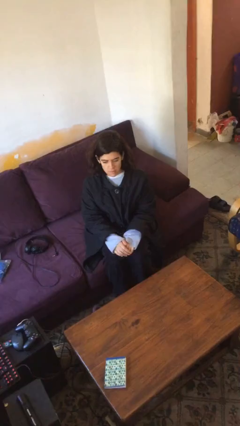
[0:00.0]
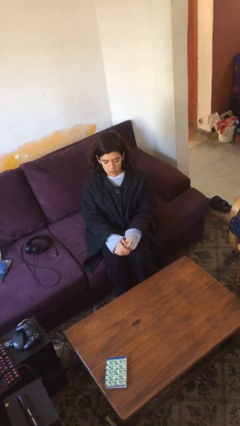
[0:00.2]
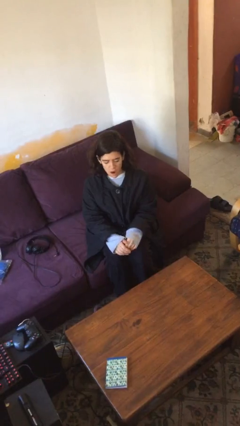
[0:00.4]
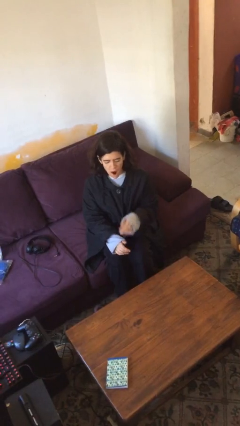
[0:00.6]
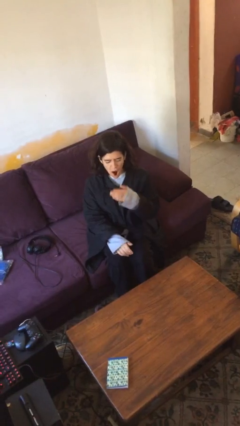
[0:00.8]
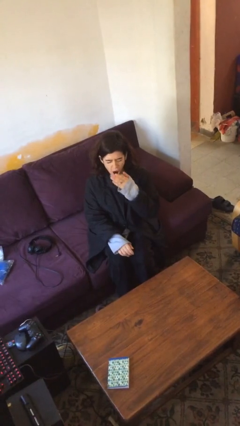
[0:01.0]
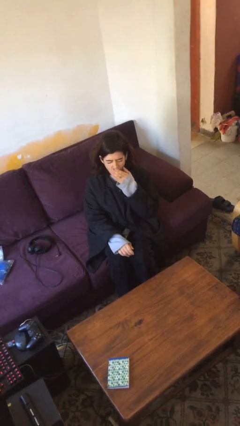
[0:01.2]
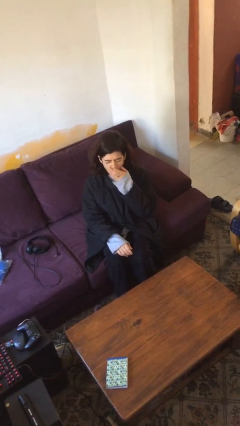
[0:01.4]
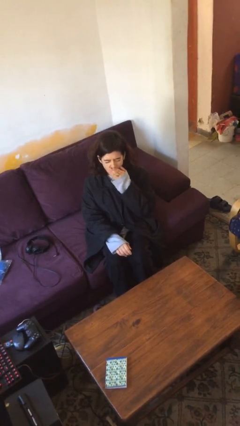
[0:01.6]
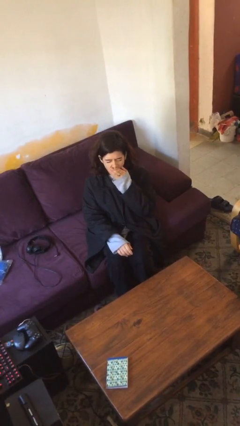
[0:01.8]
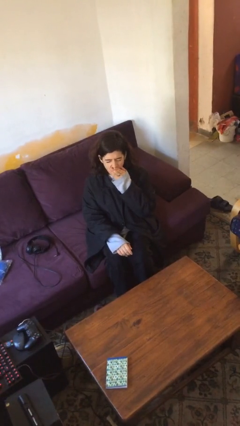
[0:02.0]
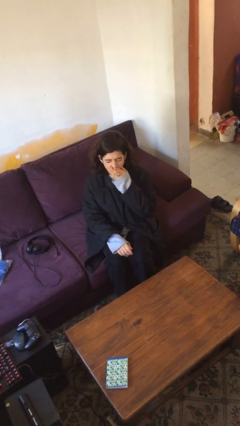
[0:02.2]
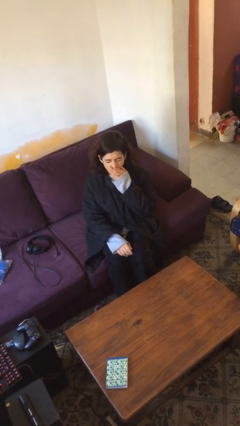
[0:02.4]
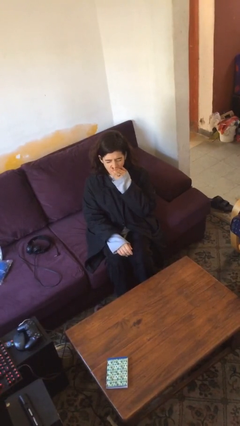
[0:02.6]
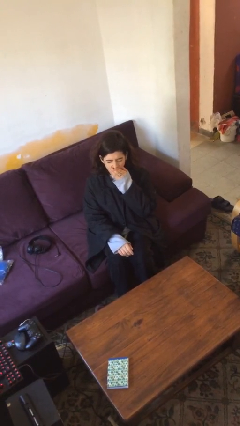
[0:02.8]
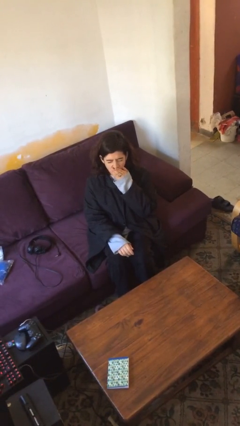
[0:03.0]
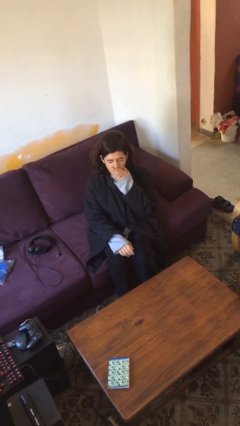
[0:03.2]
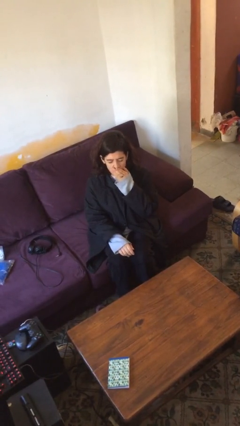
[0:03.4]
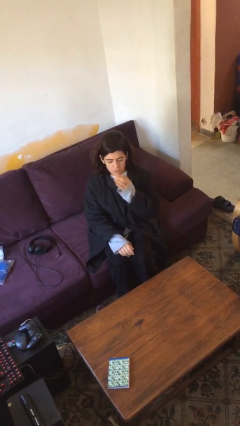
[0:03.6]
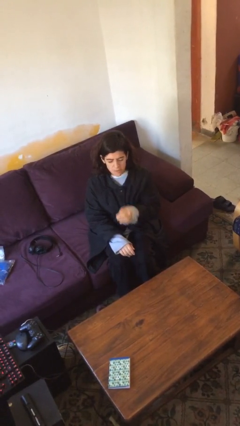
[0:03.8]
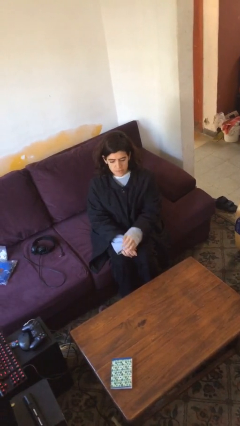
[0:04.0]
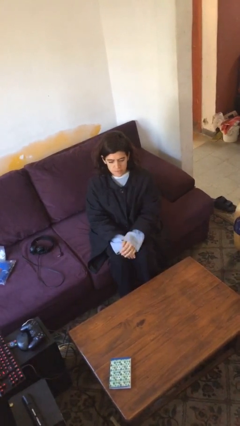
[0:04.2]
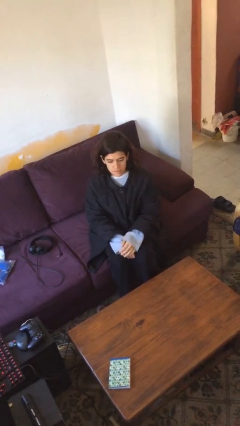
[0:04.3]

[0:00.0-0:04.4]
person yawns

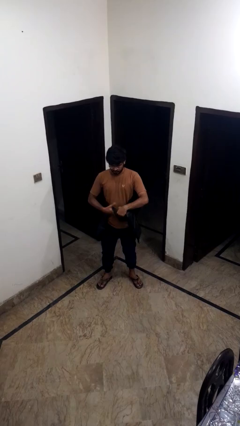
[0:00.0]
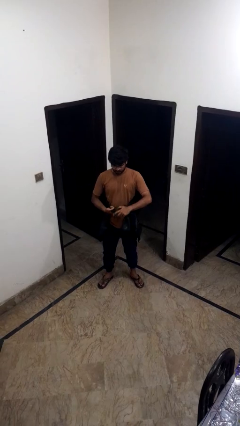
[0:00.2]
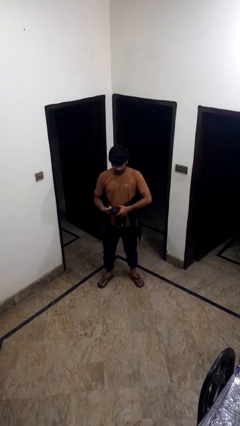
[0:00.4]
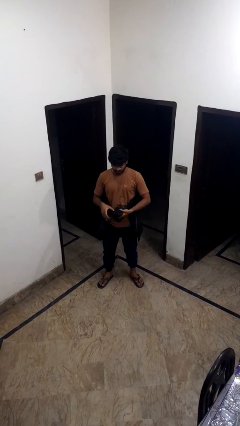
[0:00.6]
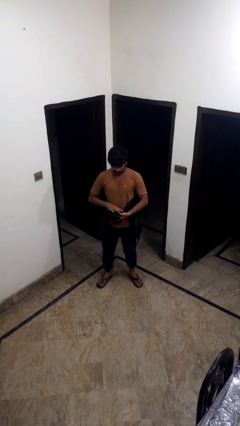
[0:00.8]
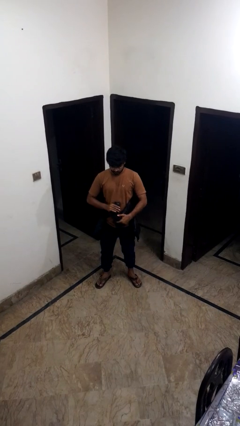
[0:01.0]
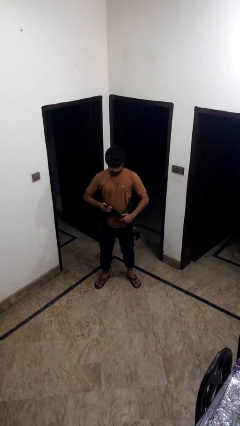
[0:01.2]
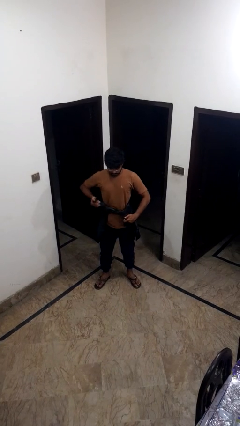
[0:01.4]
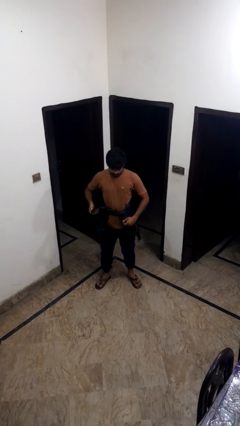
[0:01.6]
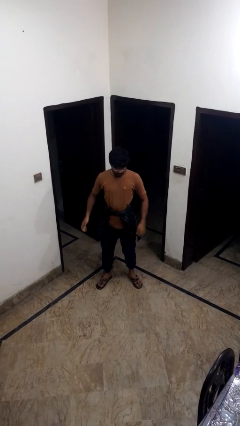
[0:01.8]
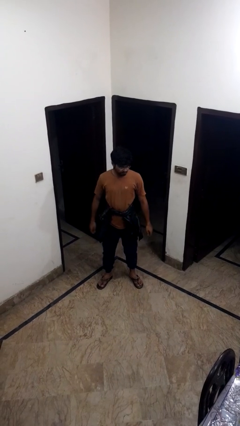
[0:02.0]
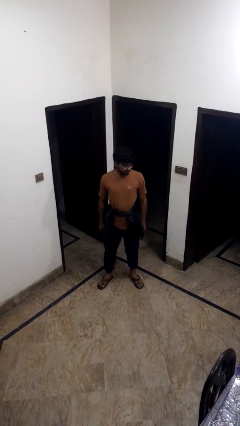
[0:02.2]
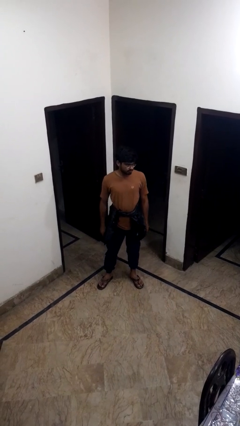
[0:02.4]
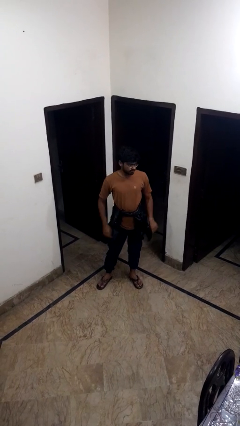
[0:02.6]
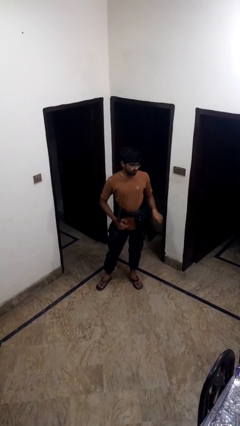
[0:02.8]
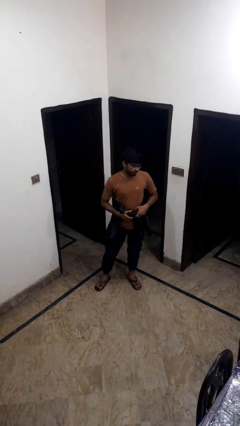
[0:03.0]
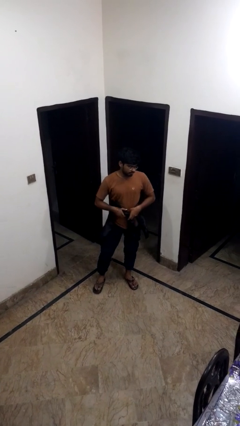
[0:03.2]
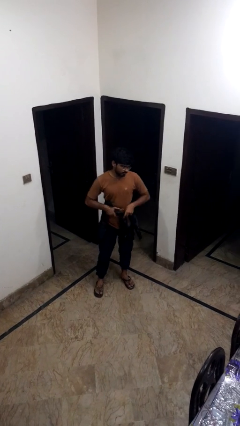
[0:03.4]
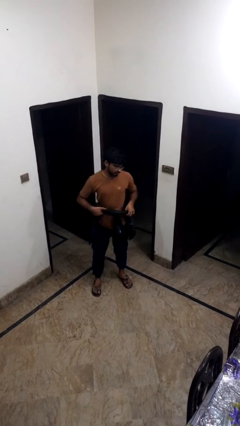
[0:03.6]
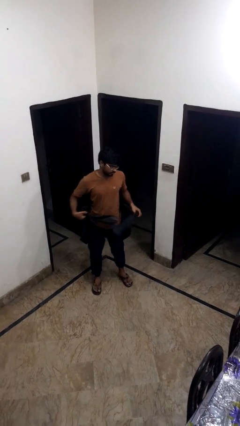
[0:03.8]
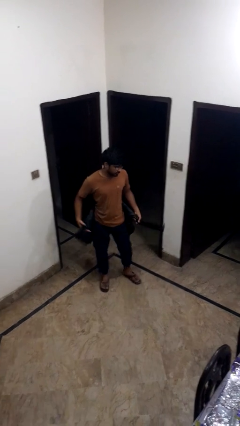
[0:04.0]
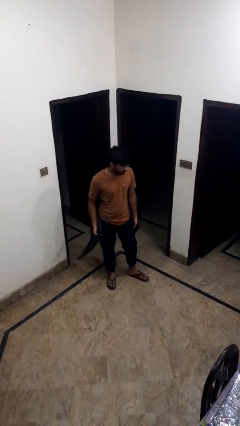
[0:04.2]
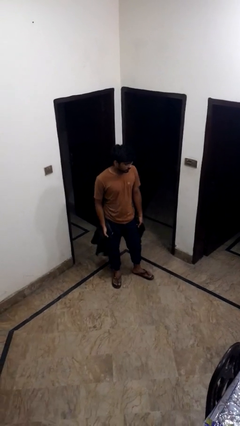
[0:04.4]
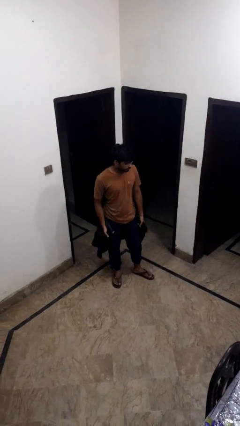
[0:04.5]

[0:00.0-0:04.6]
person carries bicycle

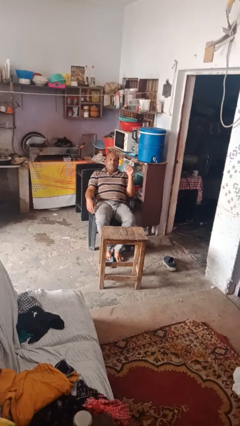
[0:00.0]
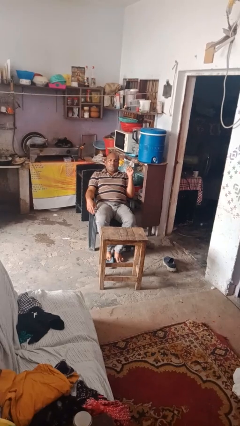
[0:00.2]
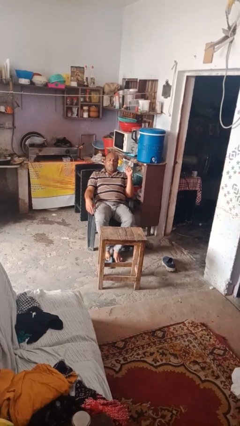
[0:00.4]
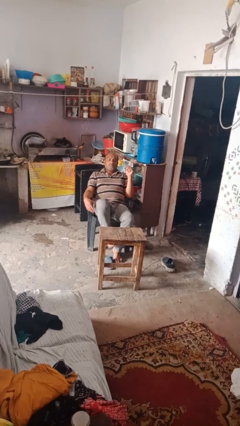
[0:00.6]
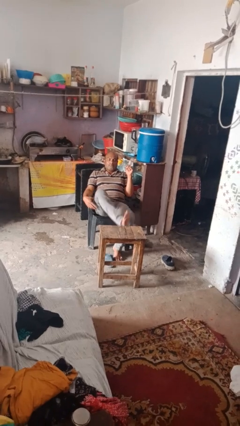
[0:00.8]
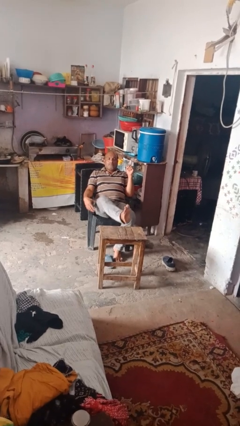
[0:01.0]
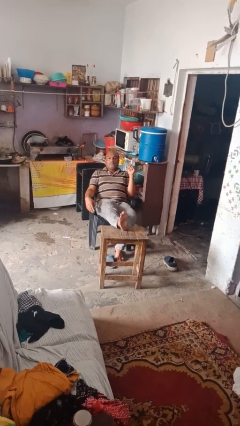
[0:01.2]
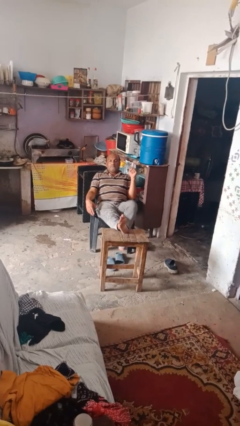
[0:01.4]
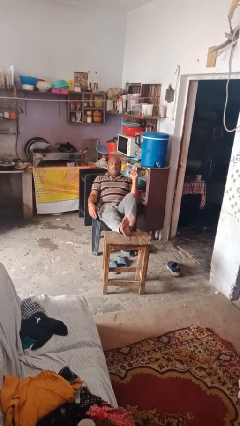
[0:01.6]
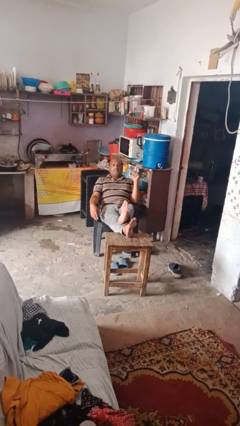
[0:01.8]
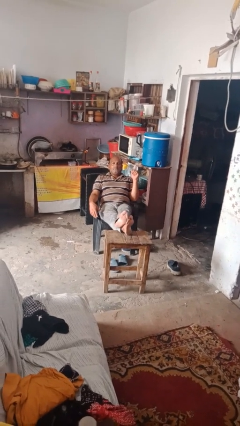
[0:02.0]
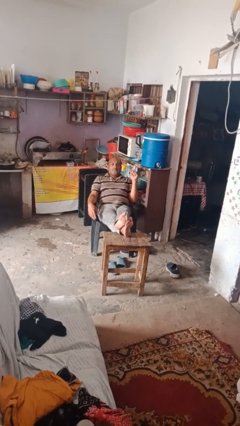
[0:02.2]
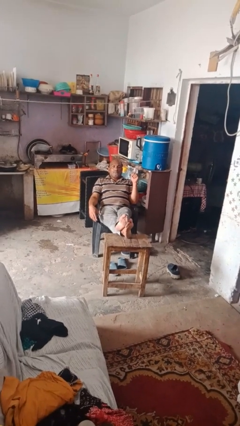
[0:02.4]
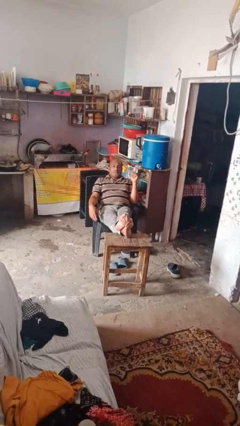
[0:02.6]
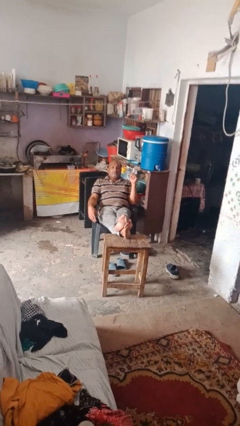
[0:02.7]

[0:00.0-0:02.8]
person puts feet up

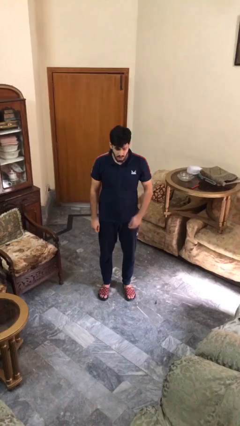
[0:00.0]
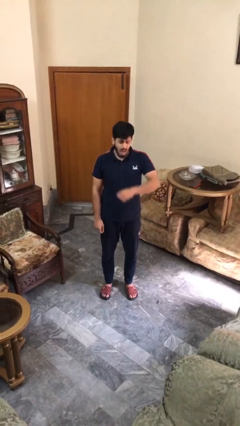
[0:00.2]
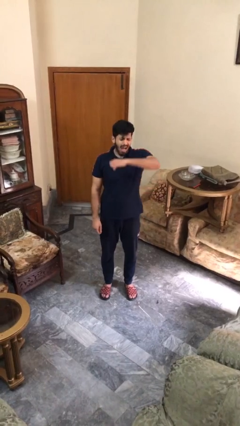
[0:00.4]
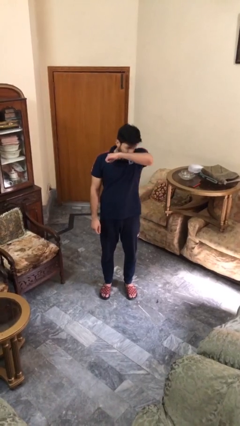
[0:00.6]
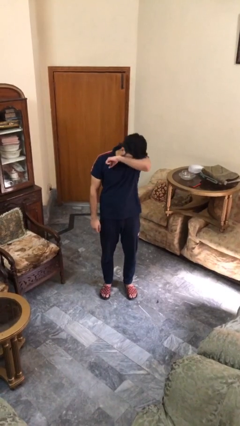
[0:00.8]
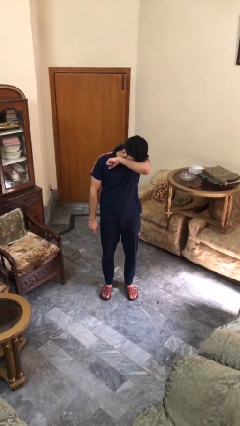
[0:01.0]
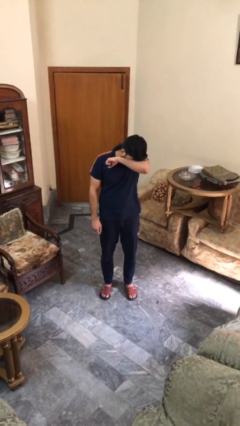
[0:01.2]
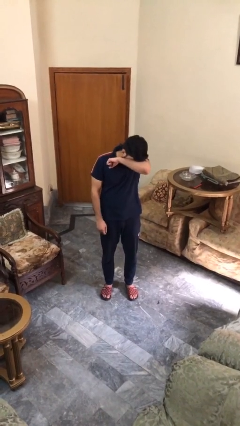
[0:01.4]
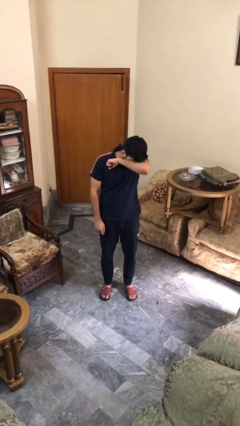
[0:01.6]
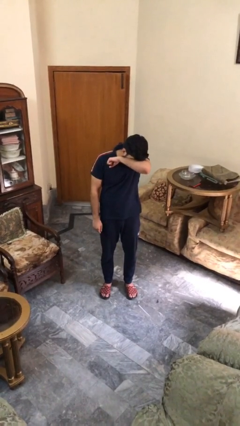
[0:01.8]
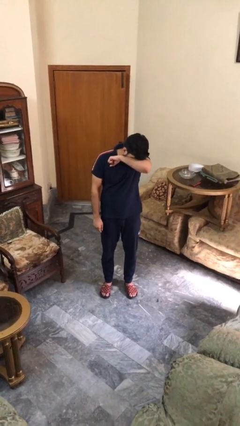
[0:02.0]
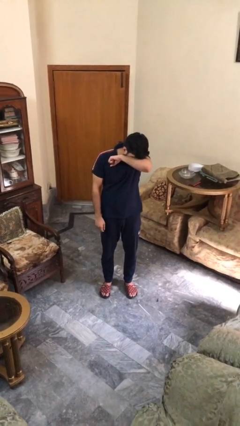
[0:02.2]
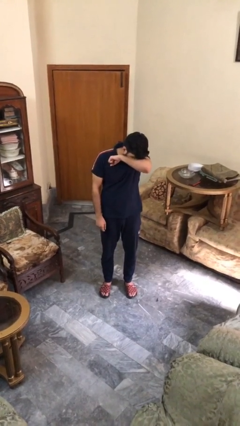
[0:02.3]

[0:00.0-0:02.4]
person sneezes into arm

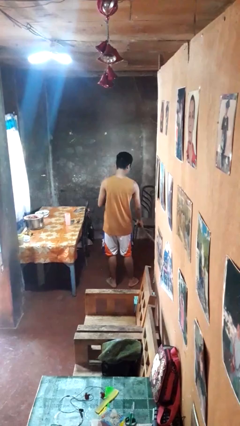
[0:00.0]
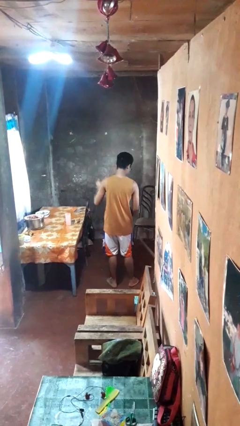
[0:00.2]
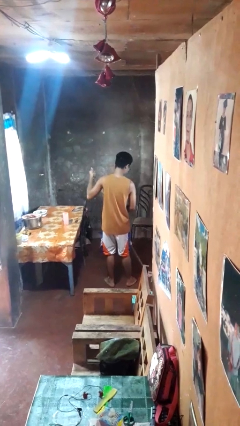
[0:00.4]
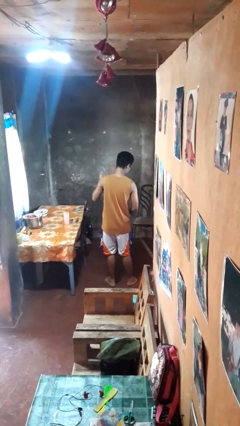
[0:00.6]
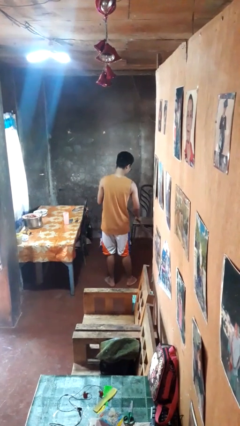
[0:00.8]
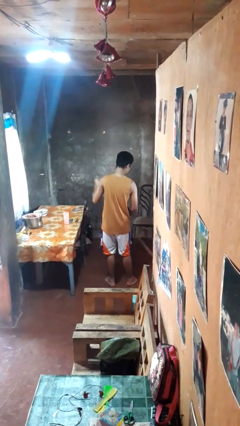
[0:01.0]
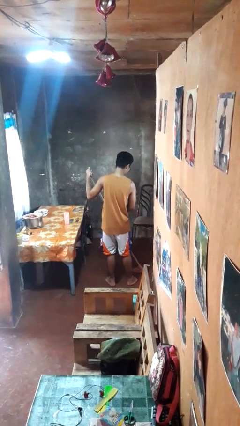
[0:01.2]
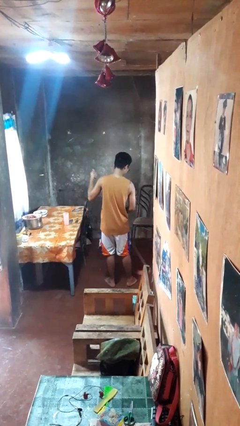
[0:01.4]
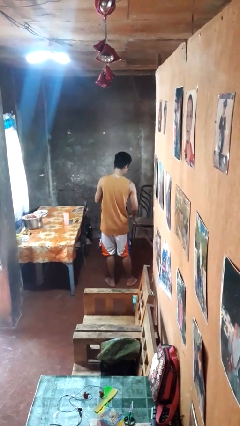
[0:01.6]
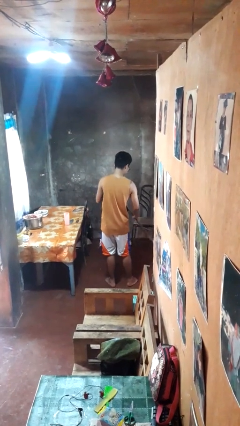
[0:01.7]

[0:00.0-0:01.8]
person mops

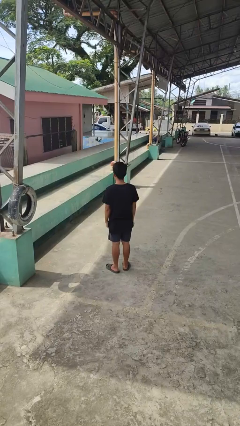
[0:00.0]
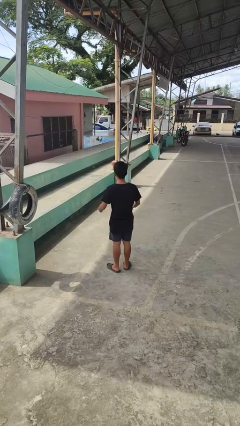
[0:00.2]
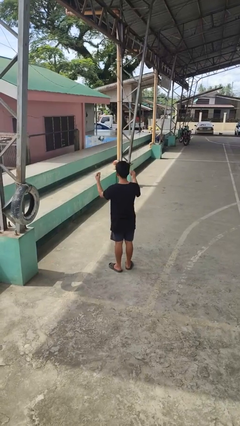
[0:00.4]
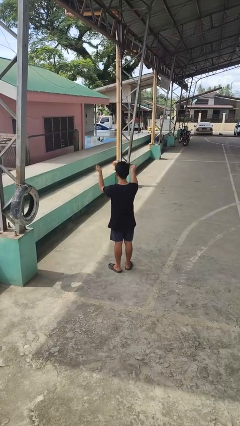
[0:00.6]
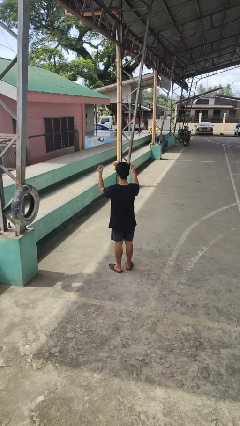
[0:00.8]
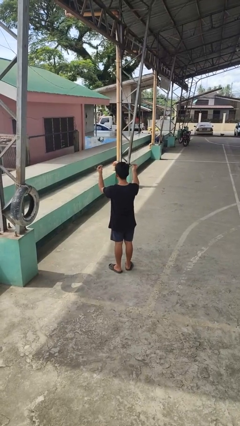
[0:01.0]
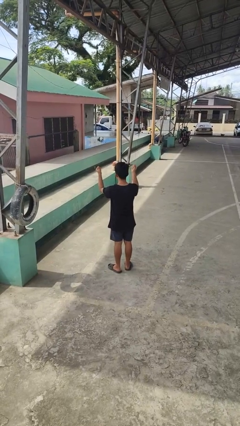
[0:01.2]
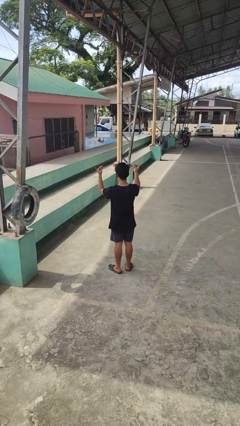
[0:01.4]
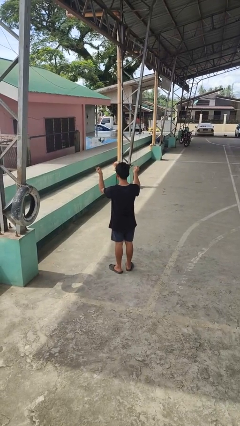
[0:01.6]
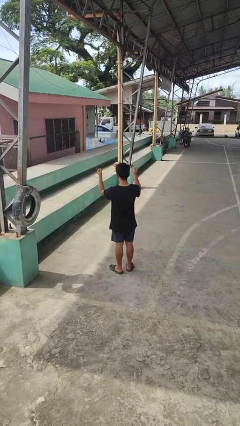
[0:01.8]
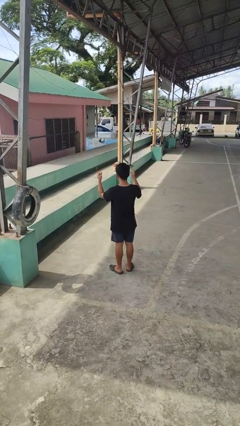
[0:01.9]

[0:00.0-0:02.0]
person snaps fingers
